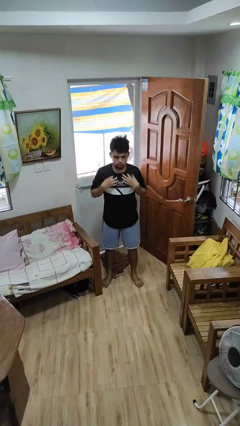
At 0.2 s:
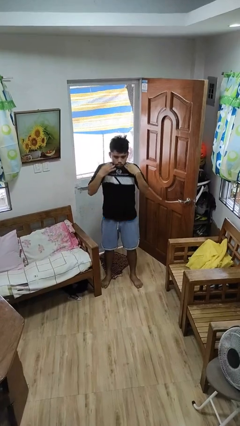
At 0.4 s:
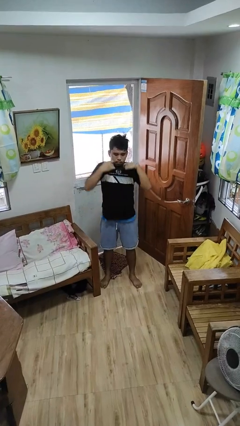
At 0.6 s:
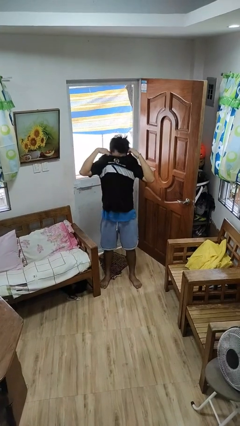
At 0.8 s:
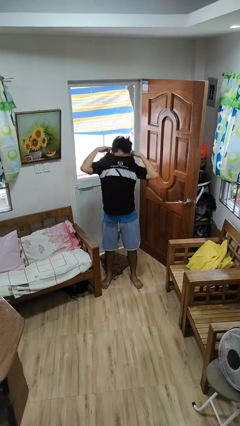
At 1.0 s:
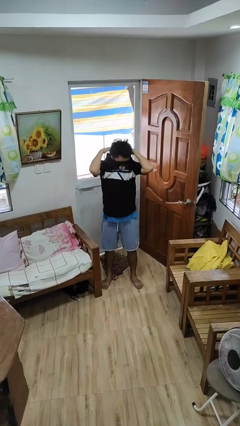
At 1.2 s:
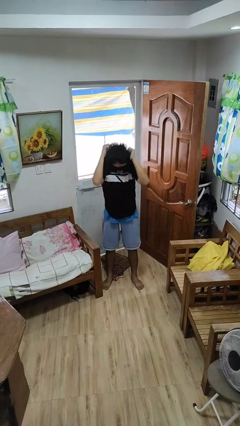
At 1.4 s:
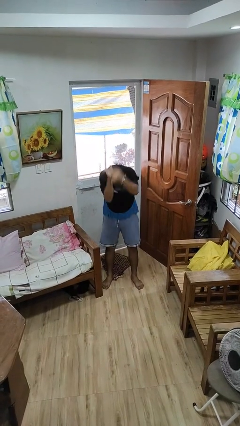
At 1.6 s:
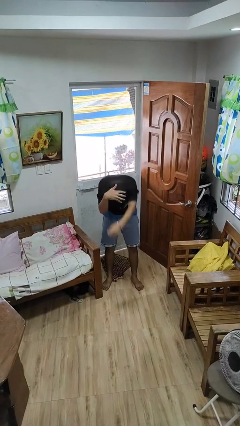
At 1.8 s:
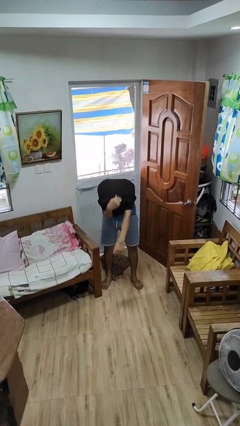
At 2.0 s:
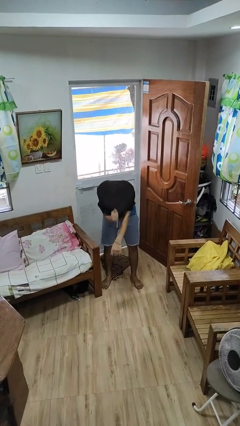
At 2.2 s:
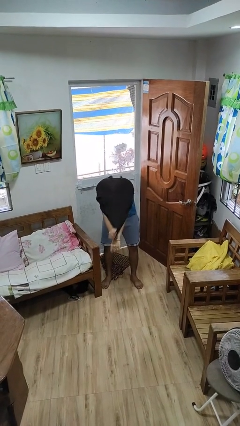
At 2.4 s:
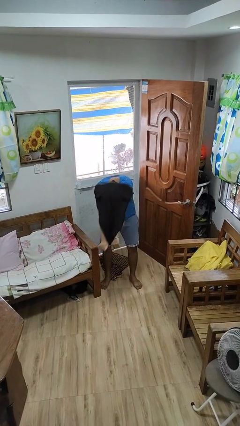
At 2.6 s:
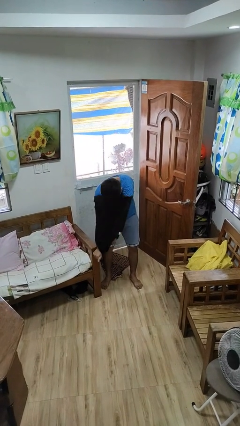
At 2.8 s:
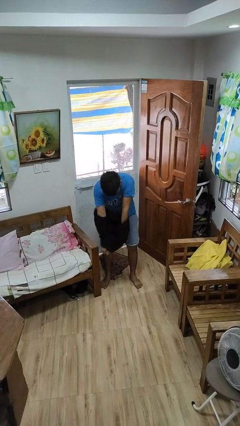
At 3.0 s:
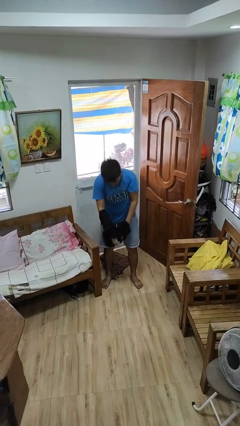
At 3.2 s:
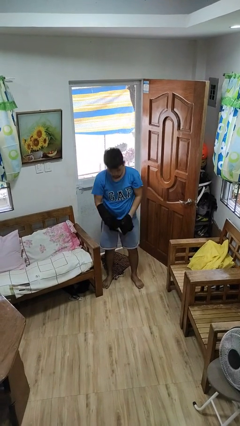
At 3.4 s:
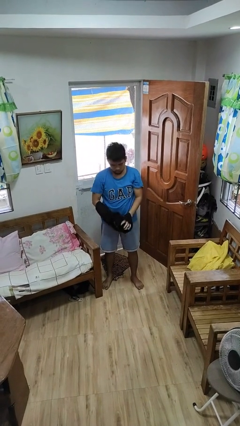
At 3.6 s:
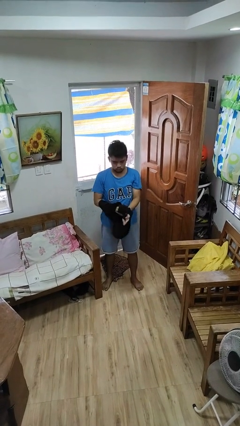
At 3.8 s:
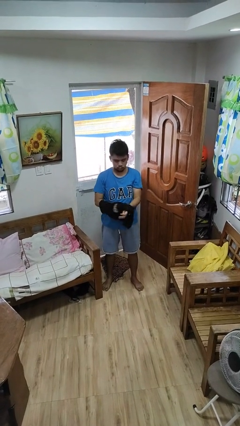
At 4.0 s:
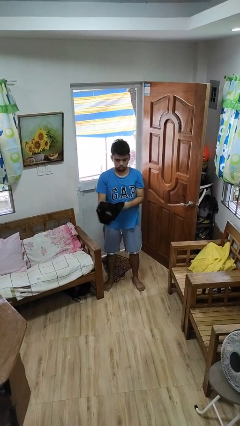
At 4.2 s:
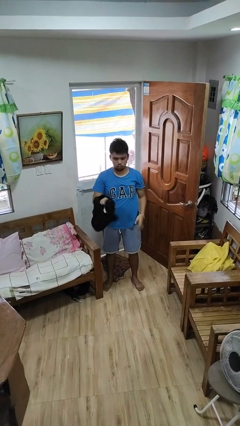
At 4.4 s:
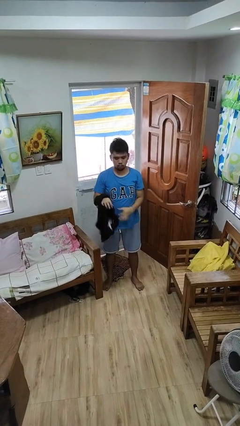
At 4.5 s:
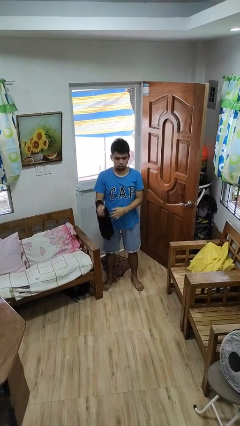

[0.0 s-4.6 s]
person takes off shirt

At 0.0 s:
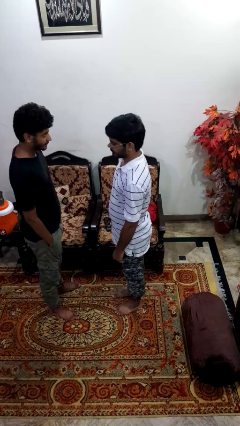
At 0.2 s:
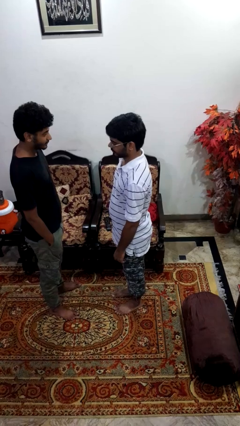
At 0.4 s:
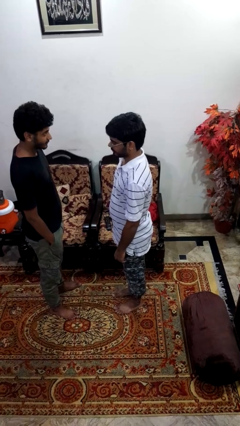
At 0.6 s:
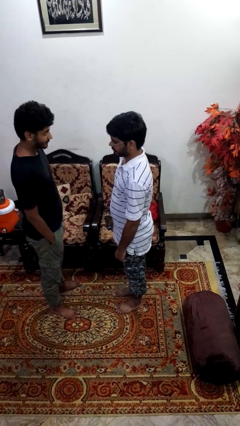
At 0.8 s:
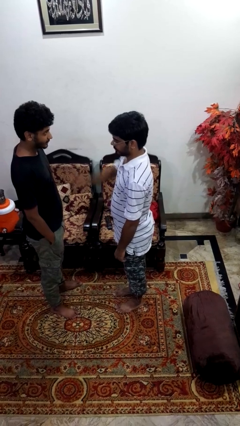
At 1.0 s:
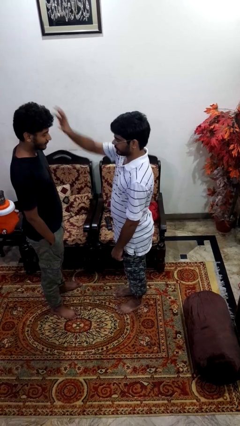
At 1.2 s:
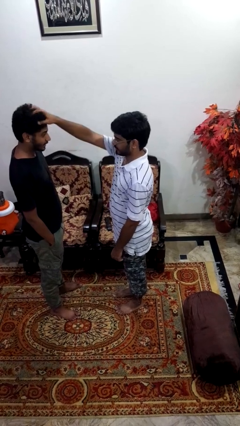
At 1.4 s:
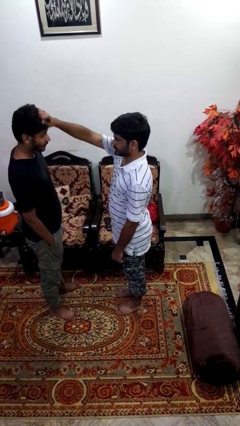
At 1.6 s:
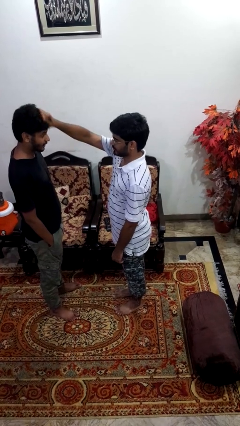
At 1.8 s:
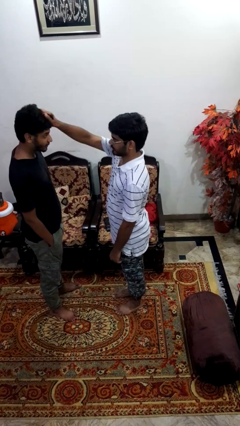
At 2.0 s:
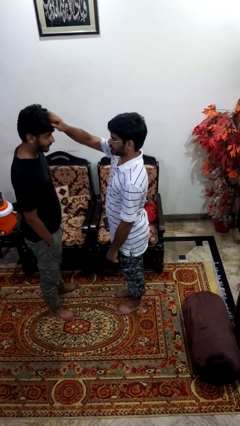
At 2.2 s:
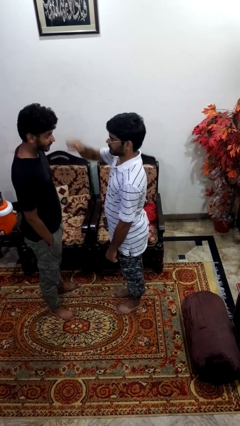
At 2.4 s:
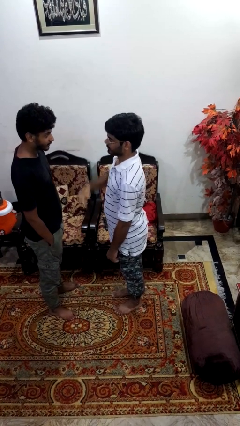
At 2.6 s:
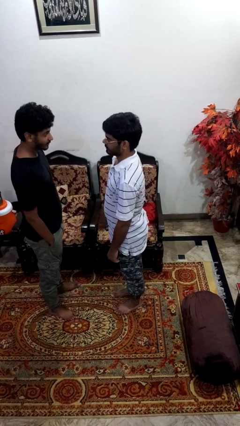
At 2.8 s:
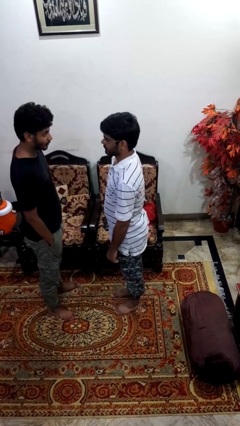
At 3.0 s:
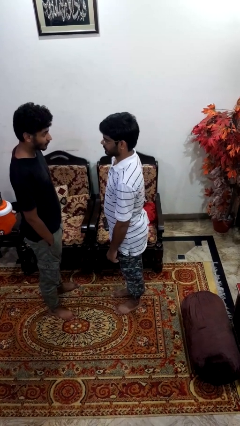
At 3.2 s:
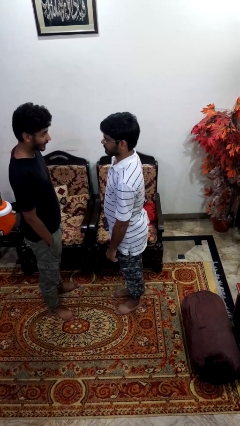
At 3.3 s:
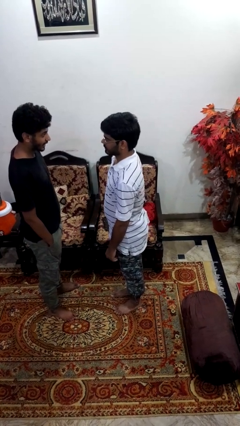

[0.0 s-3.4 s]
person grabs person by hair

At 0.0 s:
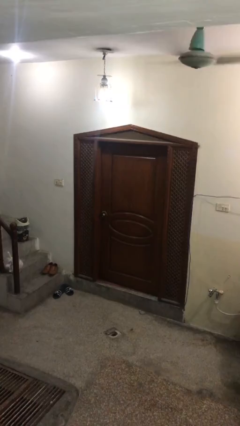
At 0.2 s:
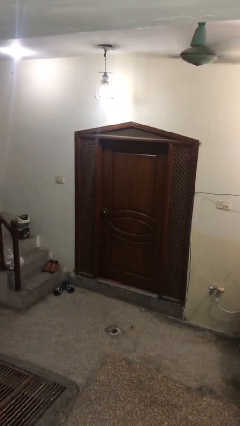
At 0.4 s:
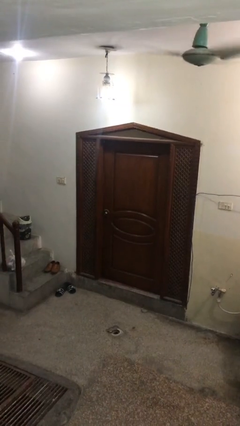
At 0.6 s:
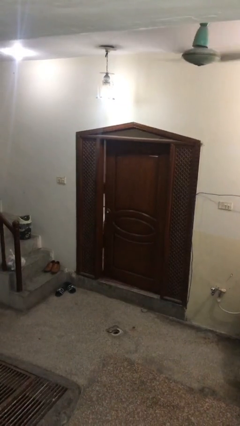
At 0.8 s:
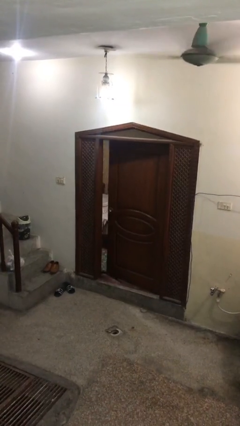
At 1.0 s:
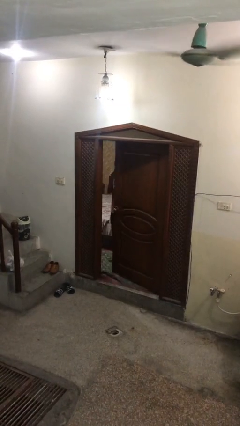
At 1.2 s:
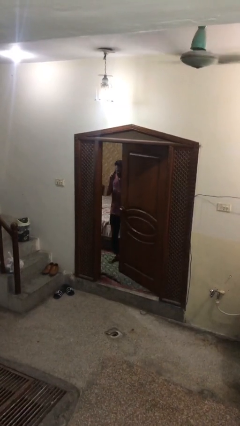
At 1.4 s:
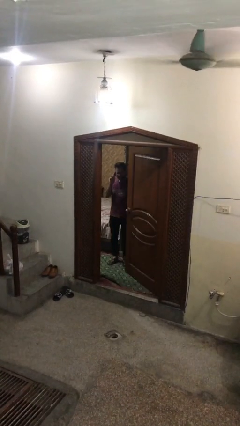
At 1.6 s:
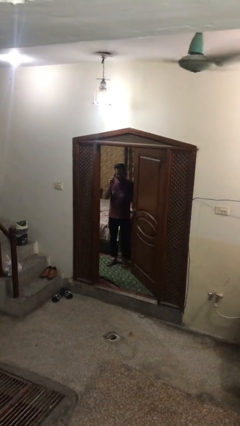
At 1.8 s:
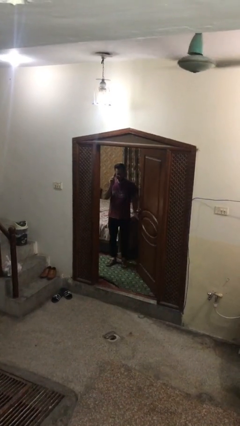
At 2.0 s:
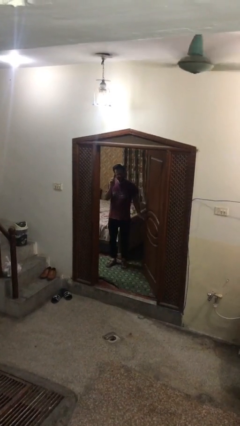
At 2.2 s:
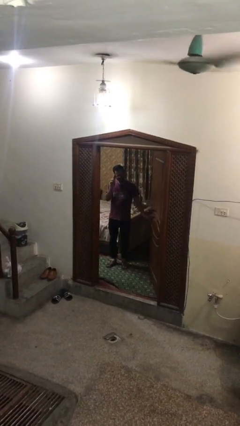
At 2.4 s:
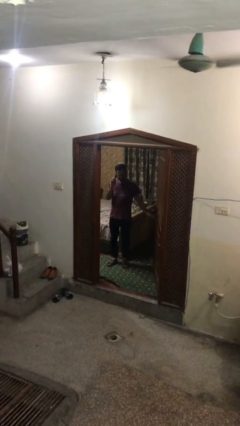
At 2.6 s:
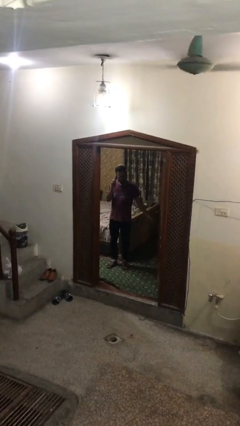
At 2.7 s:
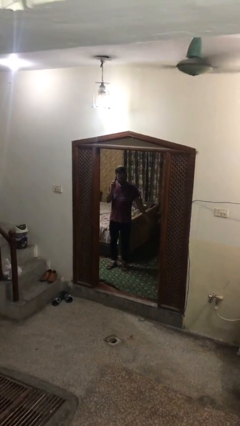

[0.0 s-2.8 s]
person opens facility door

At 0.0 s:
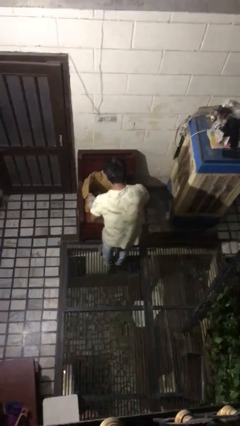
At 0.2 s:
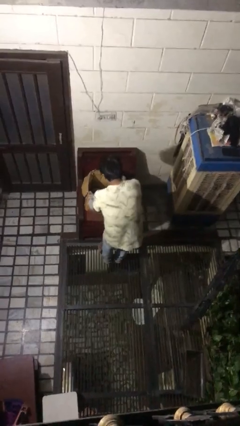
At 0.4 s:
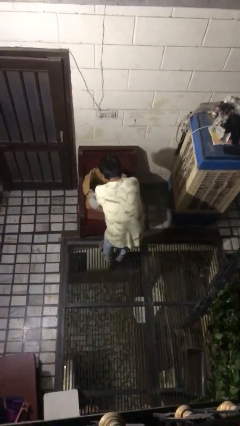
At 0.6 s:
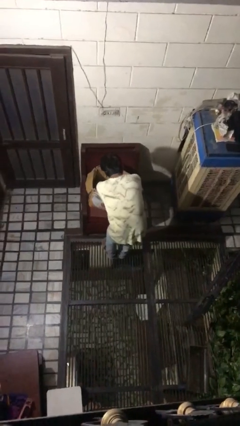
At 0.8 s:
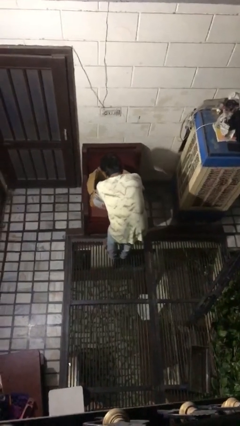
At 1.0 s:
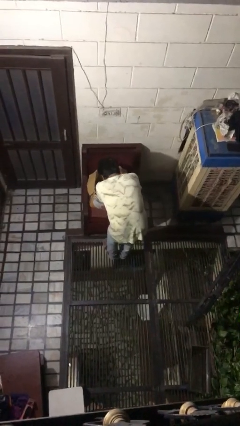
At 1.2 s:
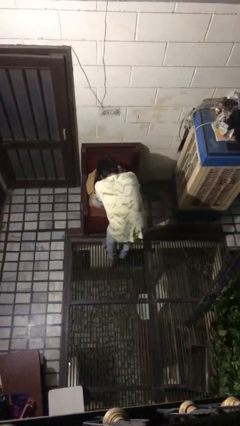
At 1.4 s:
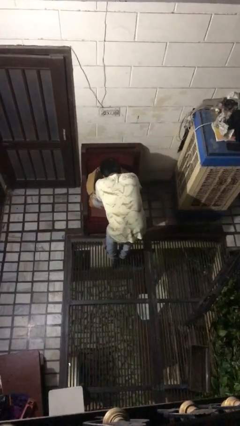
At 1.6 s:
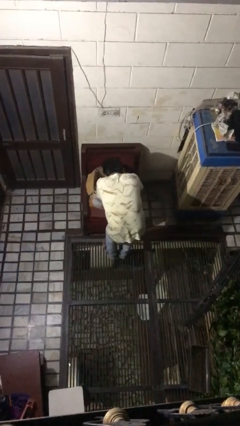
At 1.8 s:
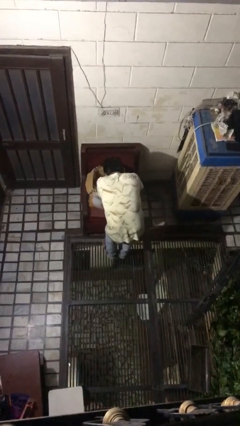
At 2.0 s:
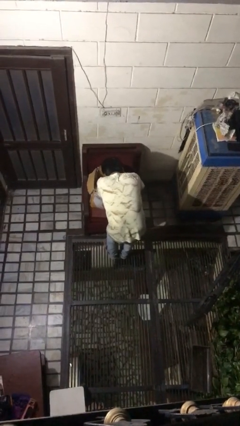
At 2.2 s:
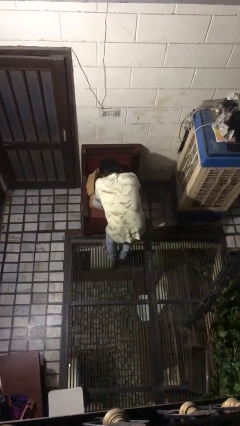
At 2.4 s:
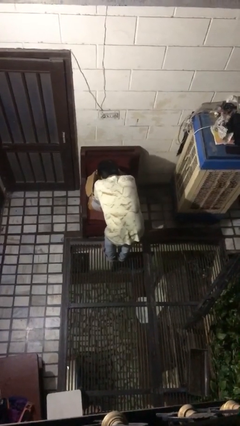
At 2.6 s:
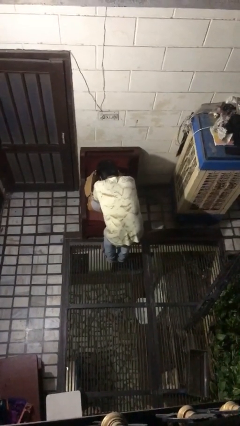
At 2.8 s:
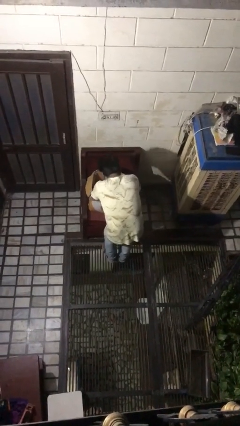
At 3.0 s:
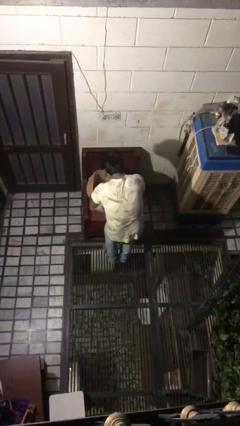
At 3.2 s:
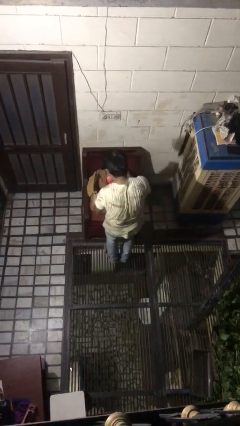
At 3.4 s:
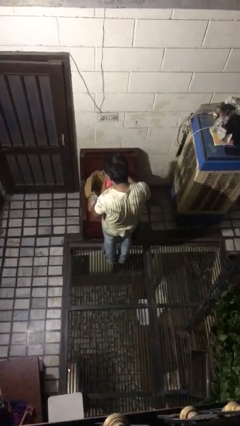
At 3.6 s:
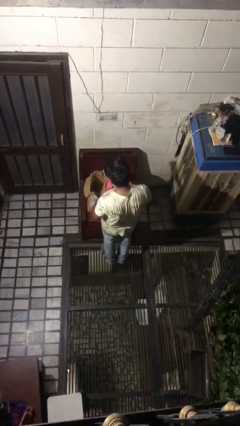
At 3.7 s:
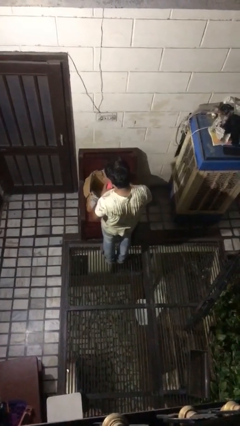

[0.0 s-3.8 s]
person searches in box

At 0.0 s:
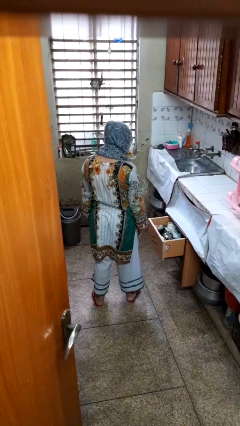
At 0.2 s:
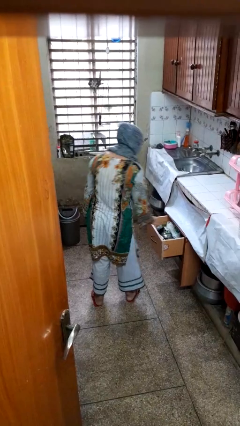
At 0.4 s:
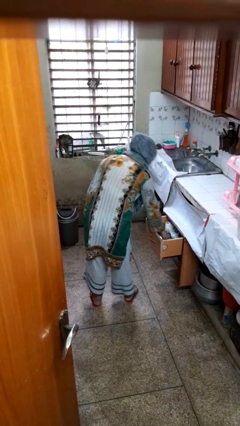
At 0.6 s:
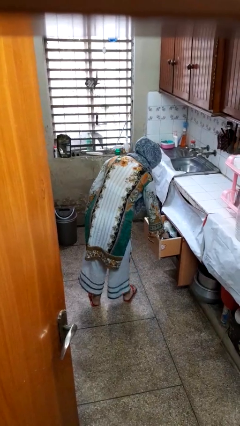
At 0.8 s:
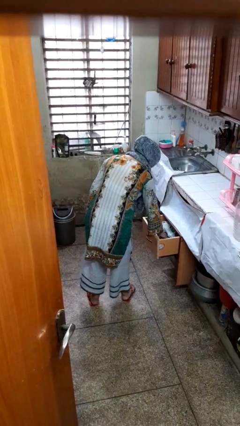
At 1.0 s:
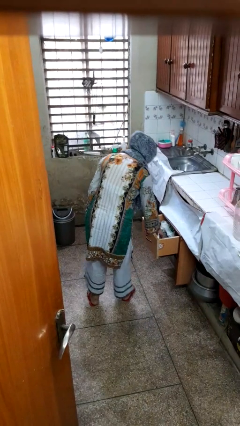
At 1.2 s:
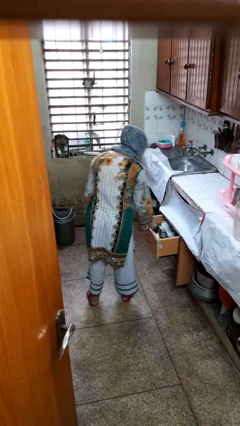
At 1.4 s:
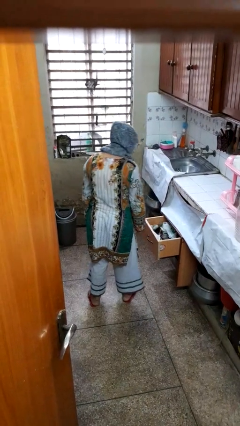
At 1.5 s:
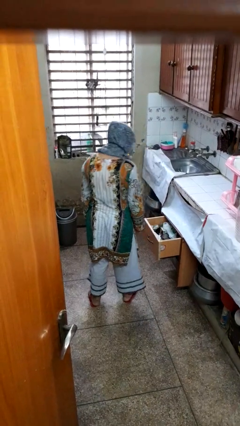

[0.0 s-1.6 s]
person searches in kitchen drawer

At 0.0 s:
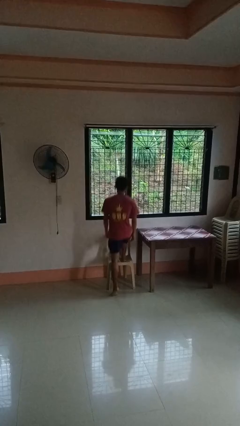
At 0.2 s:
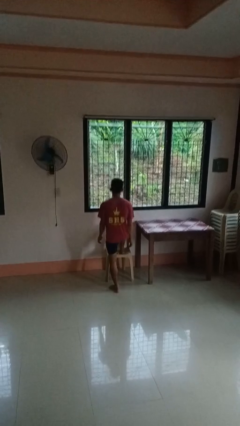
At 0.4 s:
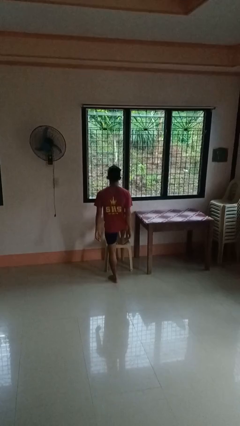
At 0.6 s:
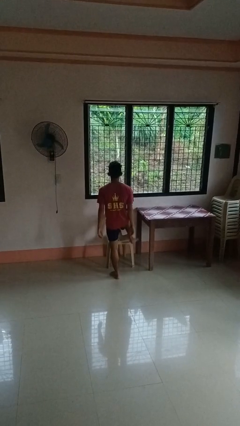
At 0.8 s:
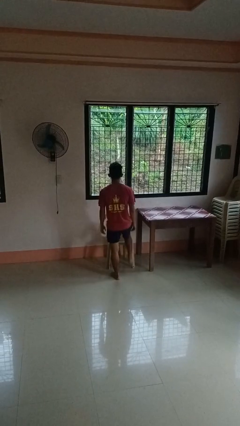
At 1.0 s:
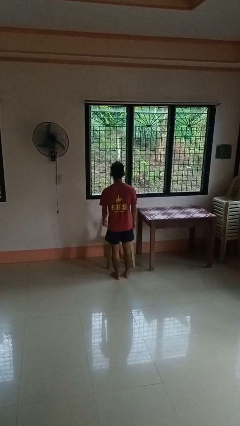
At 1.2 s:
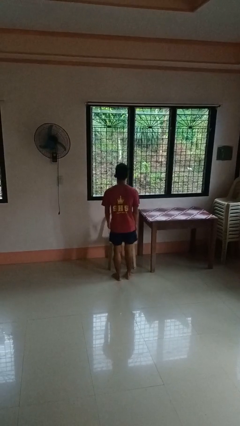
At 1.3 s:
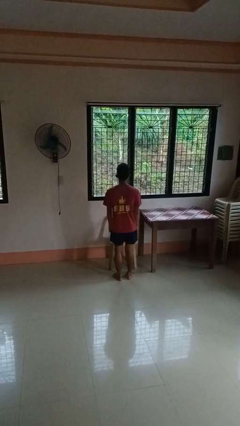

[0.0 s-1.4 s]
person climbs off chair
